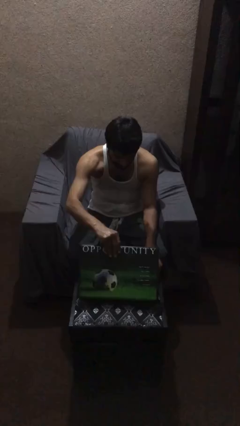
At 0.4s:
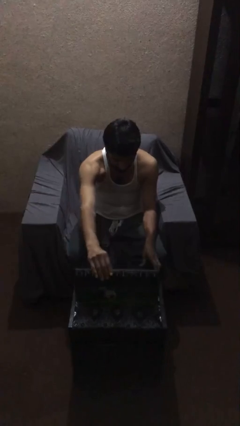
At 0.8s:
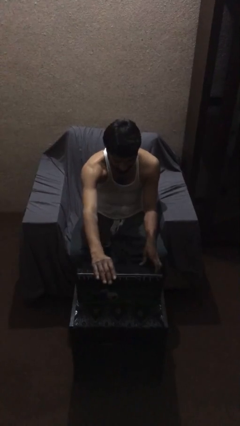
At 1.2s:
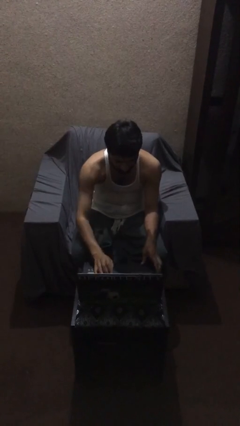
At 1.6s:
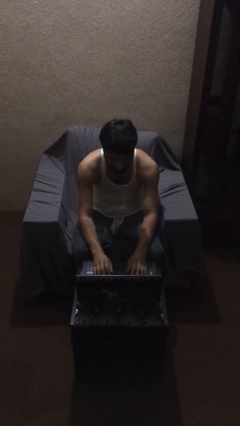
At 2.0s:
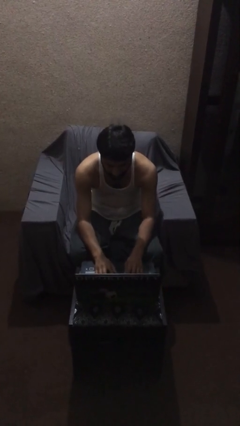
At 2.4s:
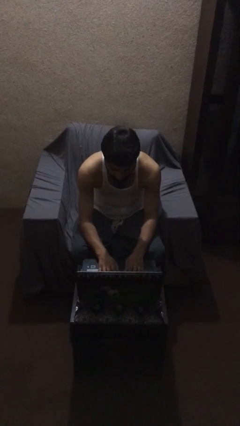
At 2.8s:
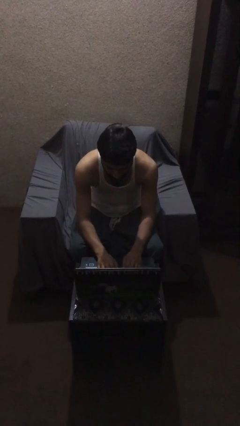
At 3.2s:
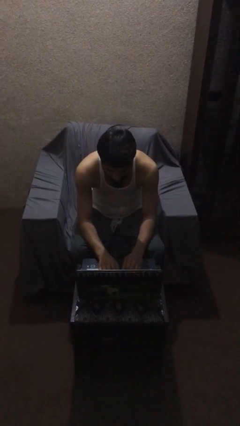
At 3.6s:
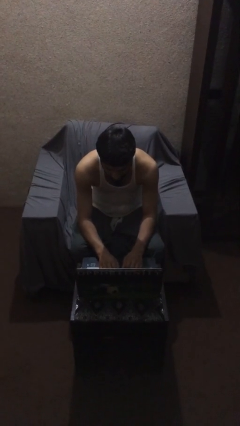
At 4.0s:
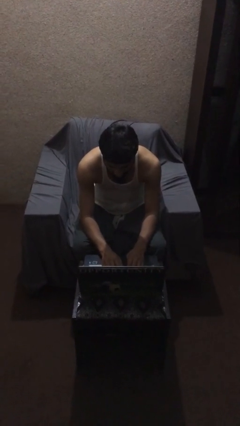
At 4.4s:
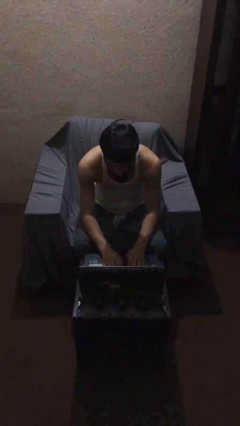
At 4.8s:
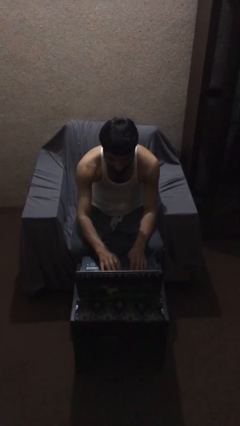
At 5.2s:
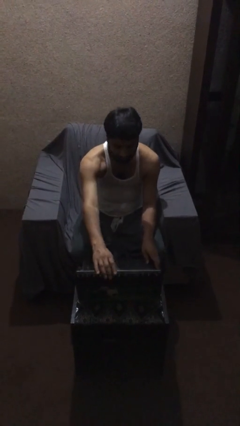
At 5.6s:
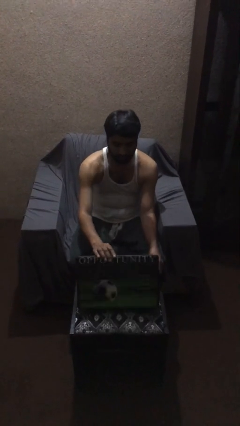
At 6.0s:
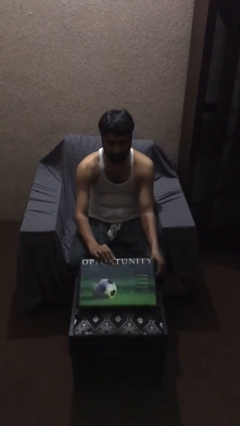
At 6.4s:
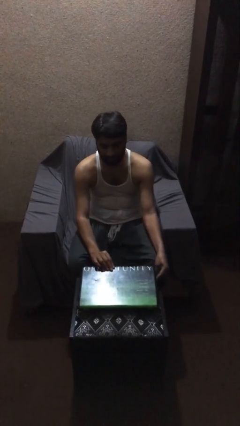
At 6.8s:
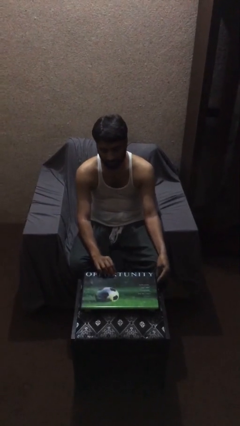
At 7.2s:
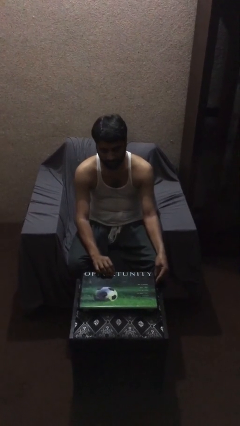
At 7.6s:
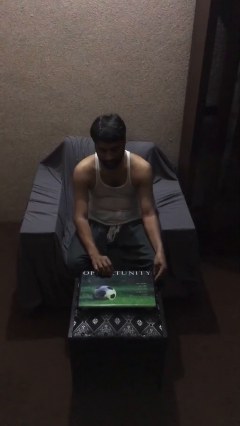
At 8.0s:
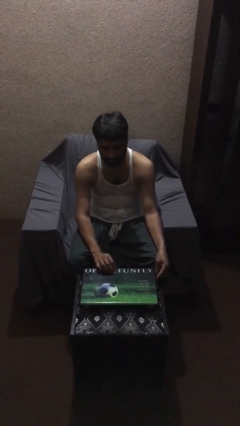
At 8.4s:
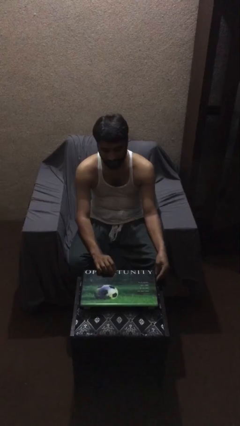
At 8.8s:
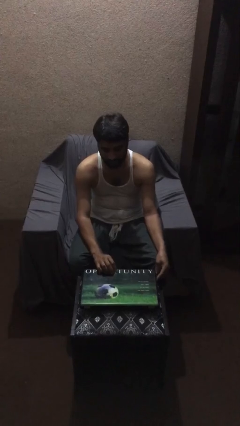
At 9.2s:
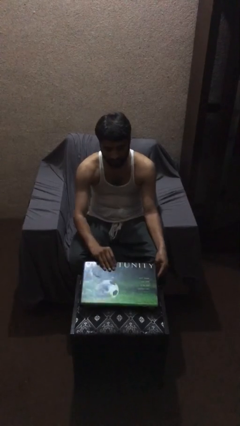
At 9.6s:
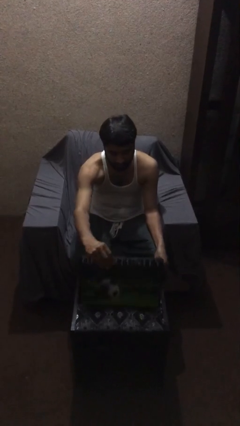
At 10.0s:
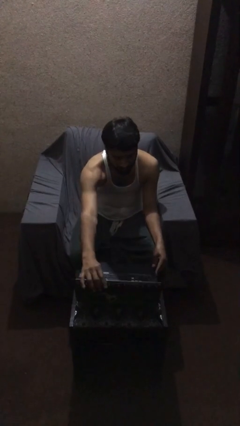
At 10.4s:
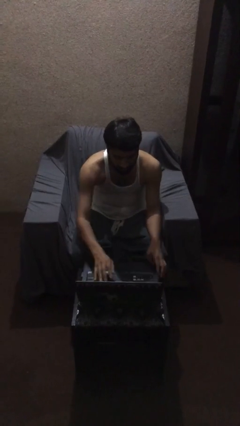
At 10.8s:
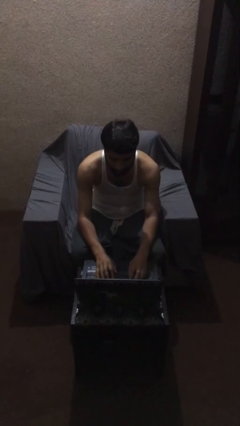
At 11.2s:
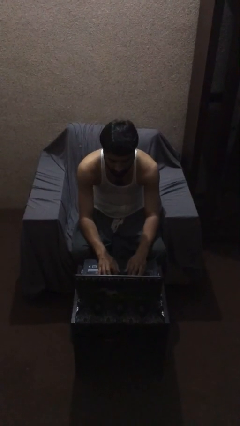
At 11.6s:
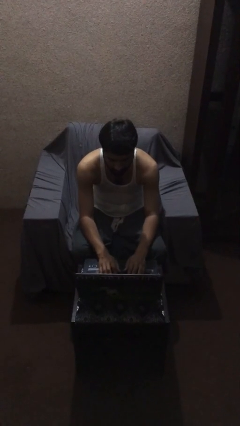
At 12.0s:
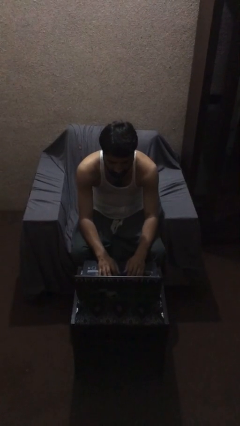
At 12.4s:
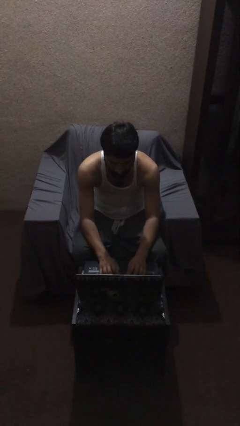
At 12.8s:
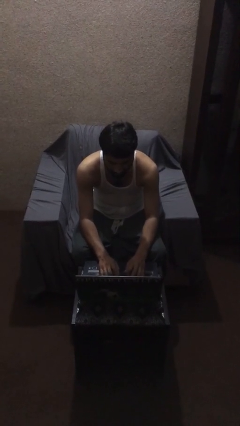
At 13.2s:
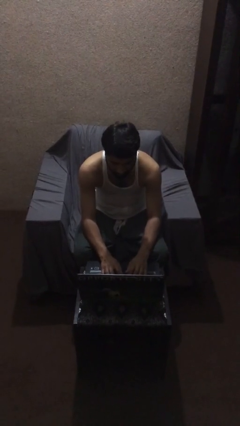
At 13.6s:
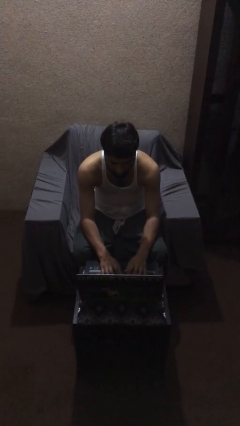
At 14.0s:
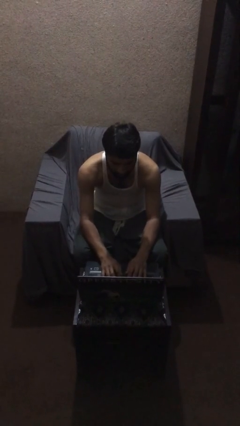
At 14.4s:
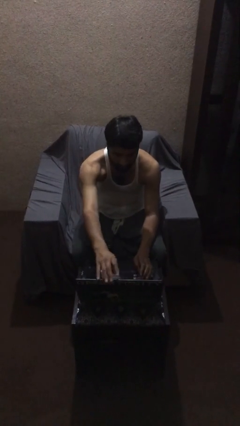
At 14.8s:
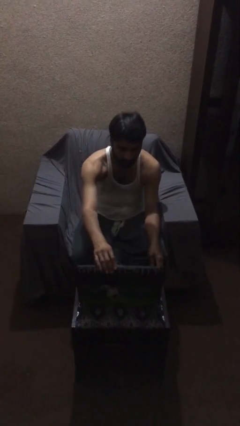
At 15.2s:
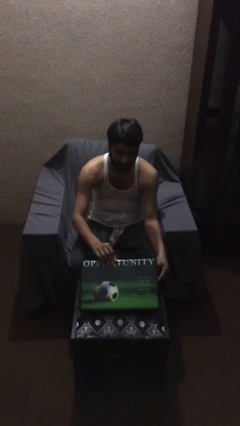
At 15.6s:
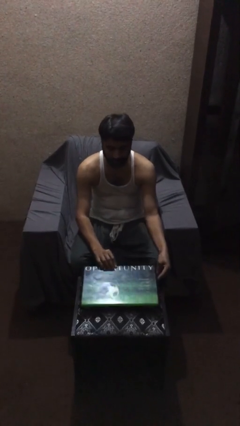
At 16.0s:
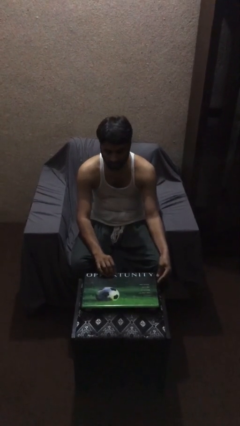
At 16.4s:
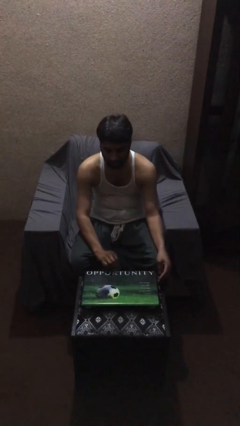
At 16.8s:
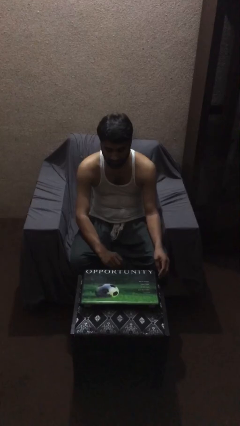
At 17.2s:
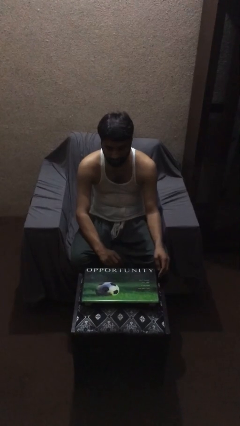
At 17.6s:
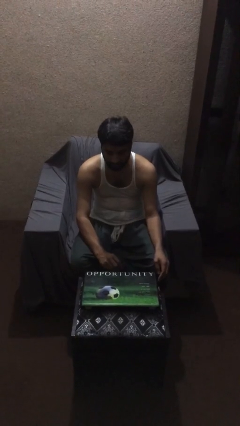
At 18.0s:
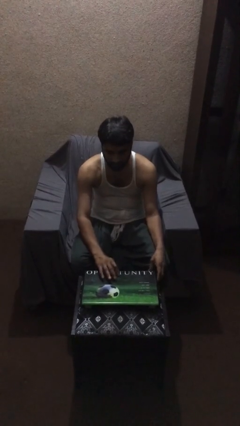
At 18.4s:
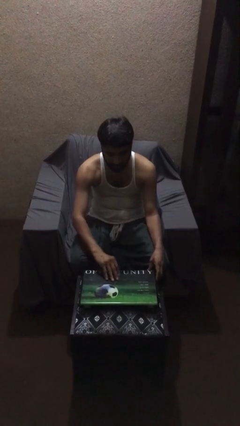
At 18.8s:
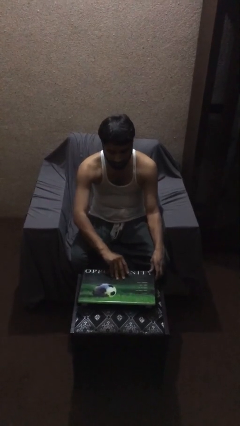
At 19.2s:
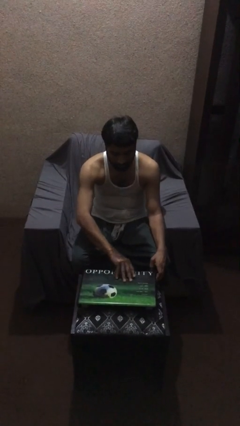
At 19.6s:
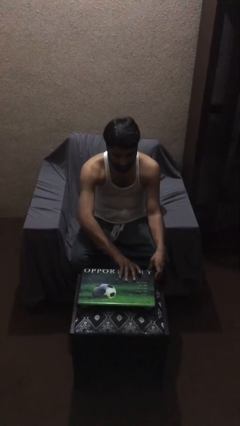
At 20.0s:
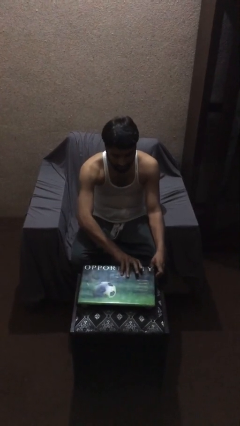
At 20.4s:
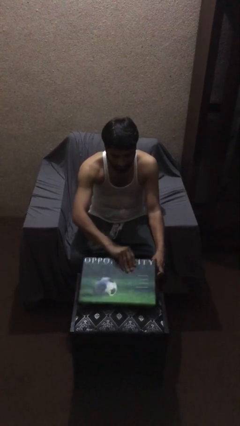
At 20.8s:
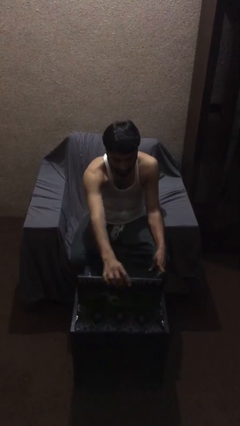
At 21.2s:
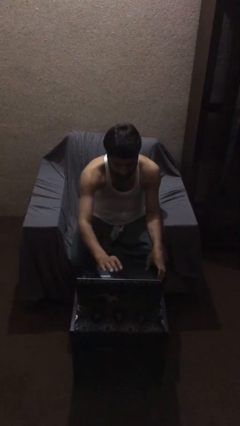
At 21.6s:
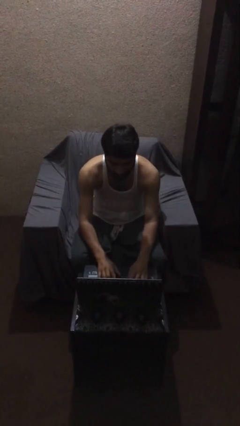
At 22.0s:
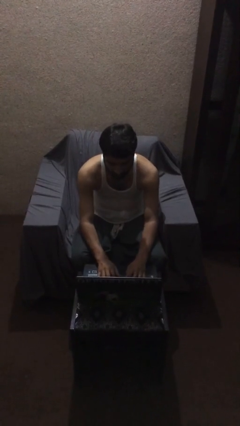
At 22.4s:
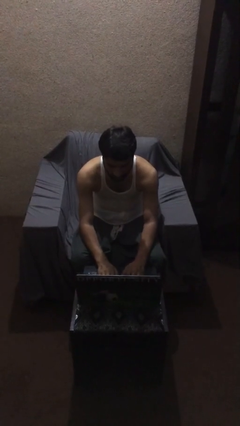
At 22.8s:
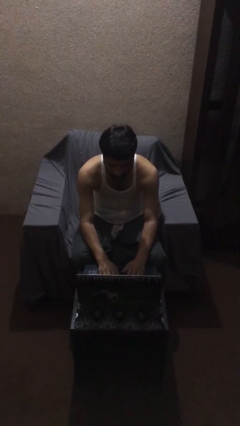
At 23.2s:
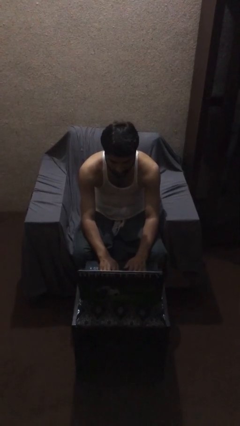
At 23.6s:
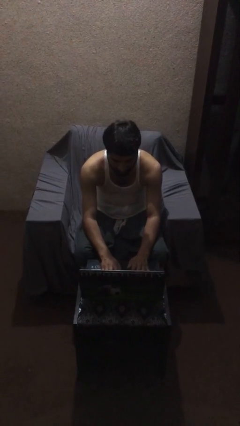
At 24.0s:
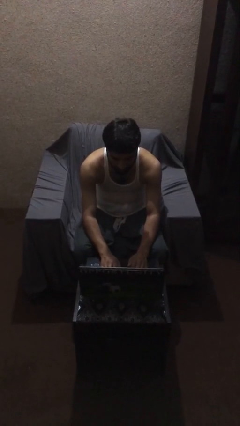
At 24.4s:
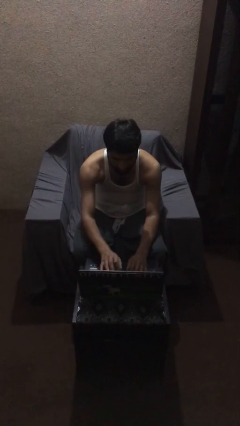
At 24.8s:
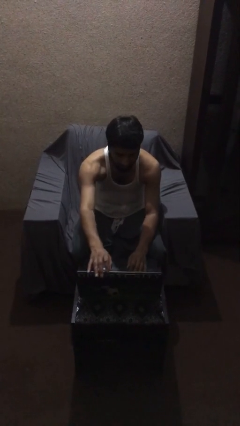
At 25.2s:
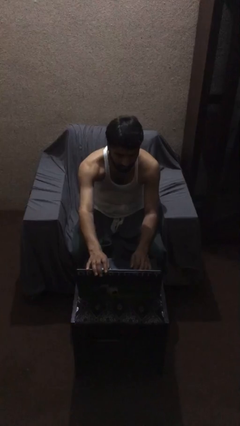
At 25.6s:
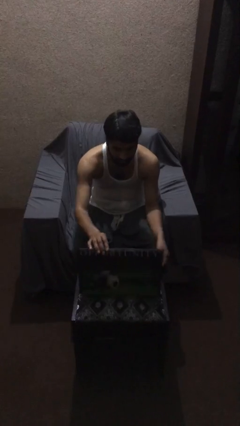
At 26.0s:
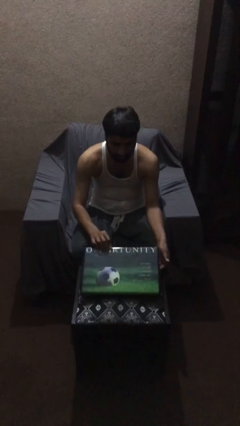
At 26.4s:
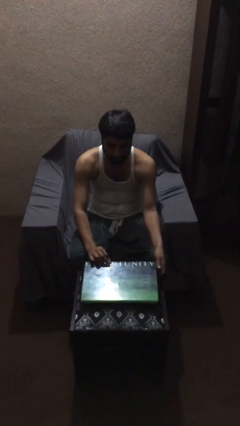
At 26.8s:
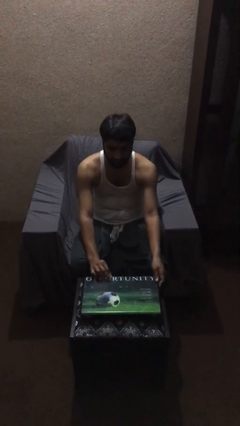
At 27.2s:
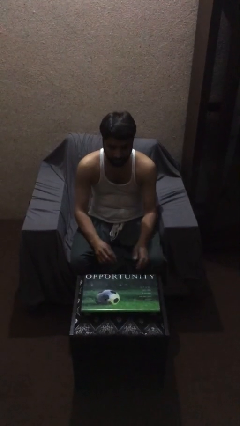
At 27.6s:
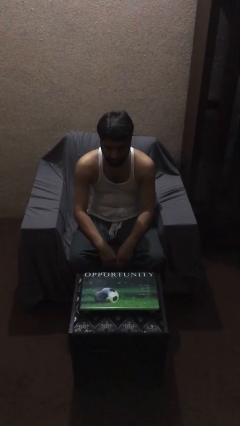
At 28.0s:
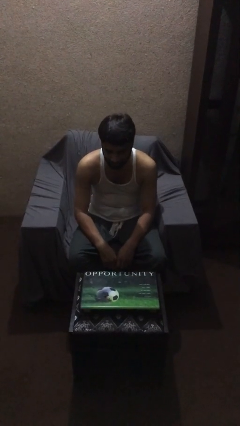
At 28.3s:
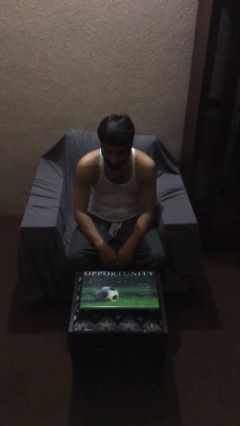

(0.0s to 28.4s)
person interacts with laptop

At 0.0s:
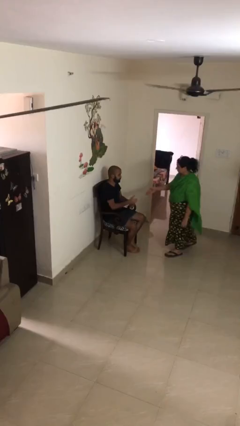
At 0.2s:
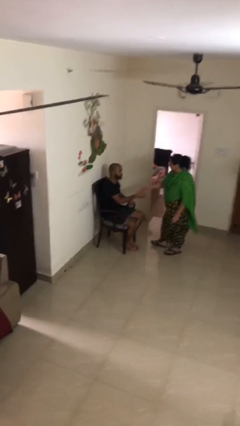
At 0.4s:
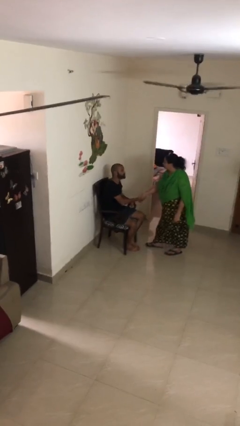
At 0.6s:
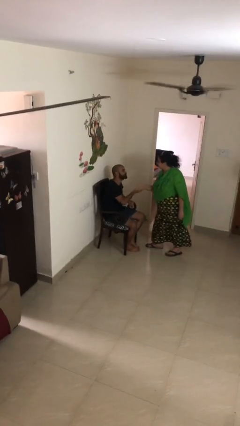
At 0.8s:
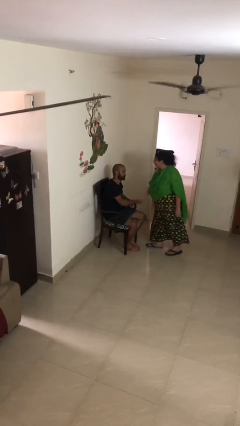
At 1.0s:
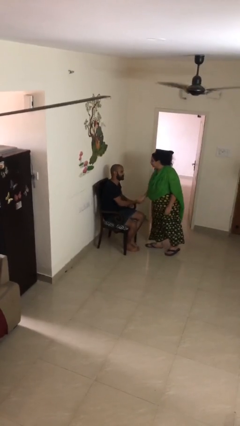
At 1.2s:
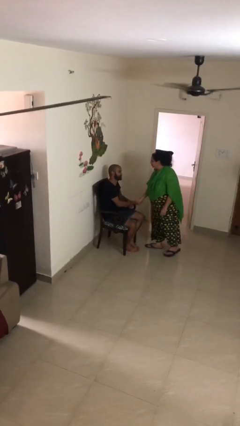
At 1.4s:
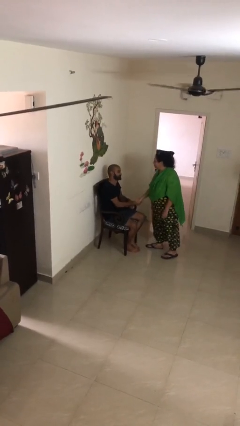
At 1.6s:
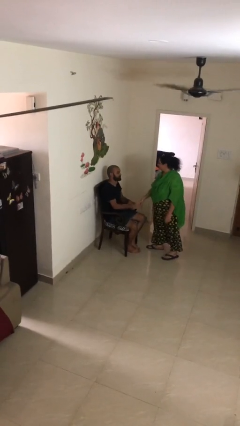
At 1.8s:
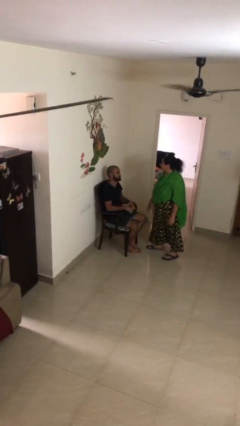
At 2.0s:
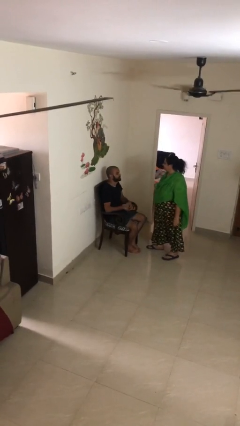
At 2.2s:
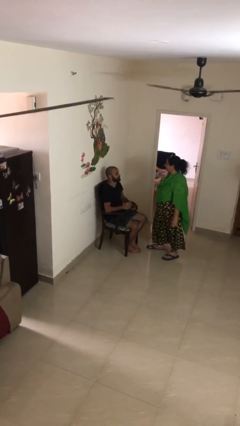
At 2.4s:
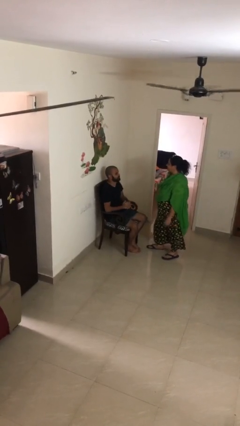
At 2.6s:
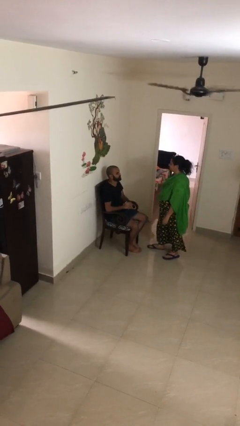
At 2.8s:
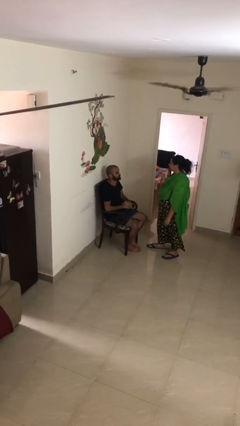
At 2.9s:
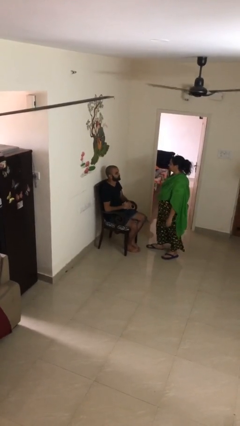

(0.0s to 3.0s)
person shakes hand

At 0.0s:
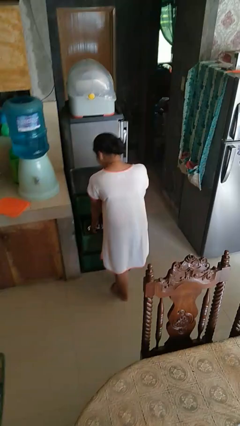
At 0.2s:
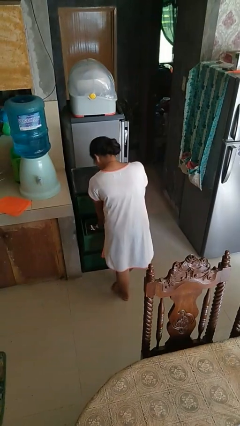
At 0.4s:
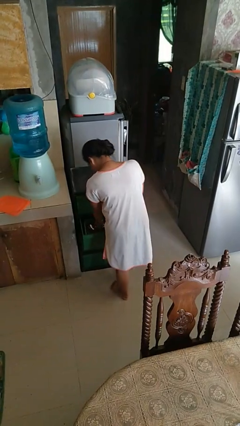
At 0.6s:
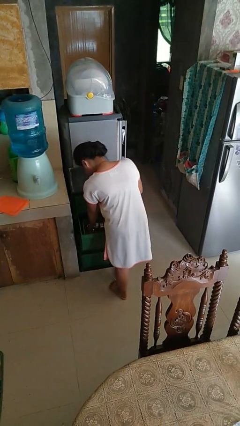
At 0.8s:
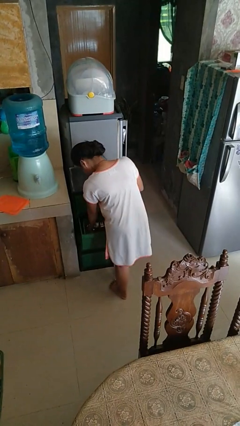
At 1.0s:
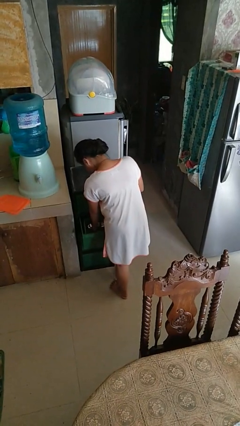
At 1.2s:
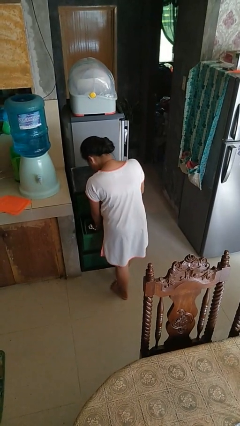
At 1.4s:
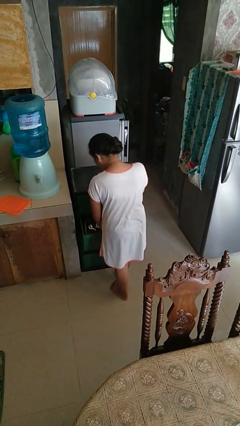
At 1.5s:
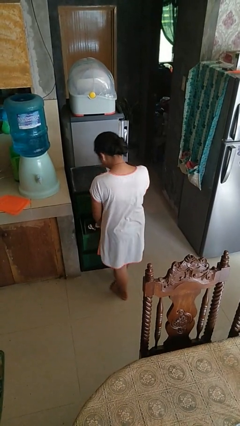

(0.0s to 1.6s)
person searches in kitchen drawer
